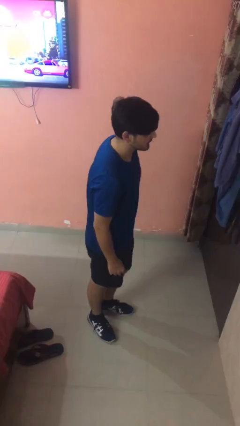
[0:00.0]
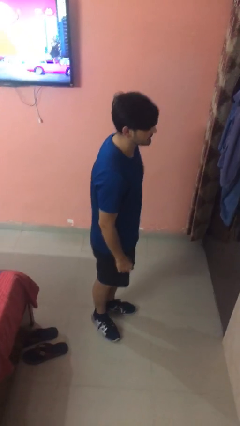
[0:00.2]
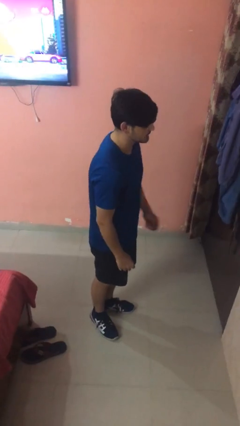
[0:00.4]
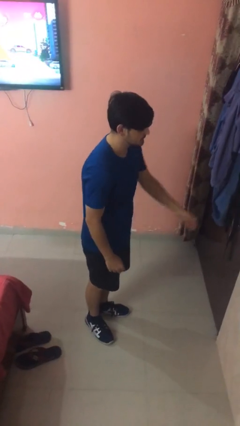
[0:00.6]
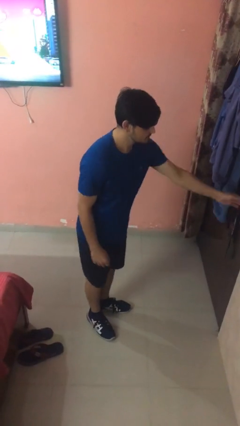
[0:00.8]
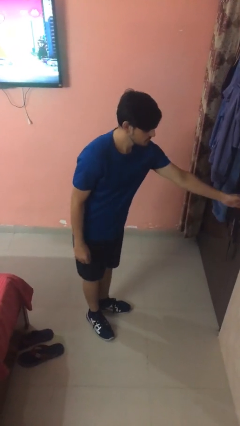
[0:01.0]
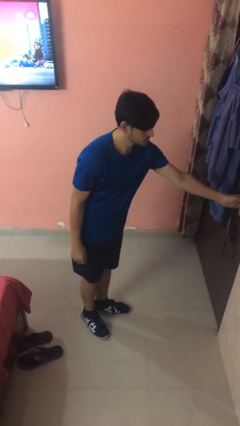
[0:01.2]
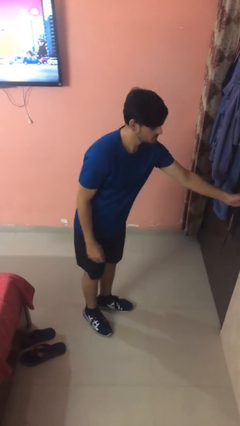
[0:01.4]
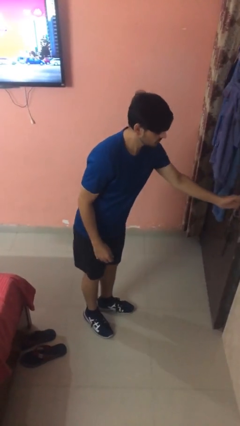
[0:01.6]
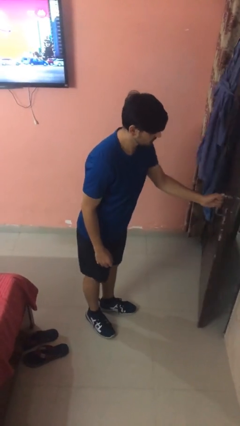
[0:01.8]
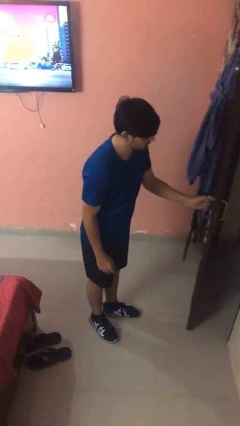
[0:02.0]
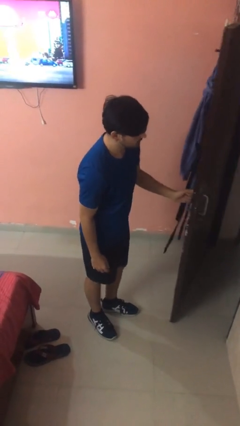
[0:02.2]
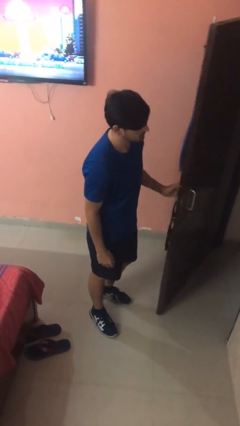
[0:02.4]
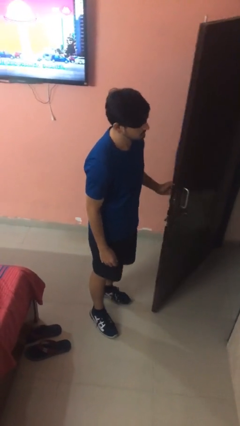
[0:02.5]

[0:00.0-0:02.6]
person opens facility door

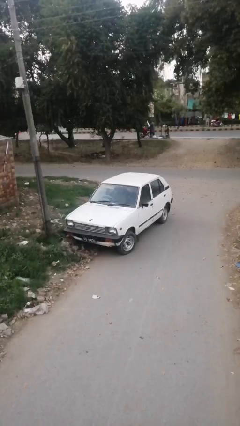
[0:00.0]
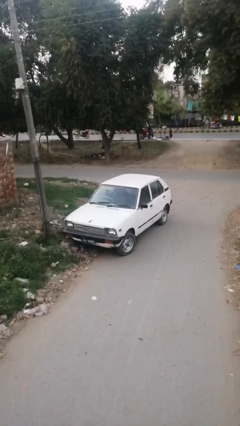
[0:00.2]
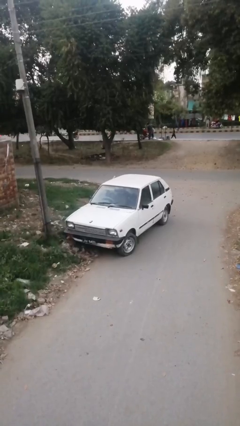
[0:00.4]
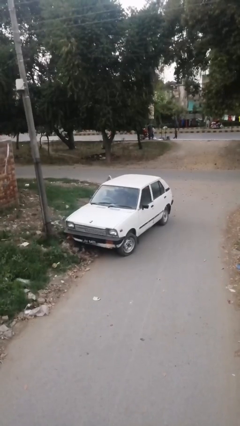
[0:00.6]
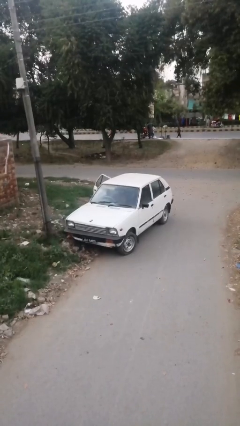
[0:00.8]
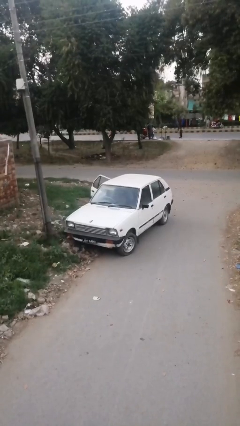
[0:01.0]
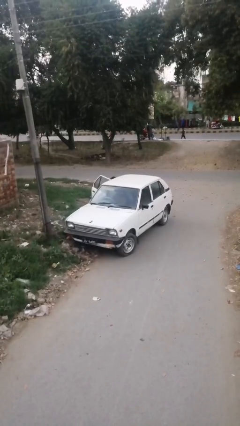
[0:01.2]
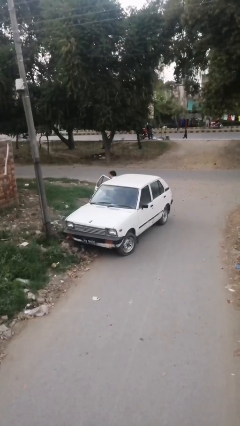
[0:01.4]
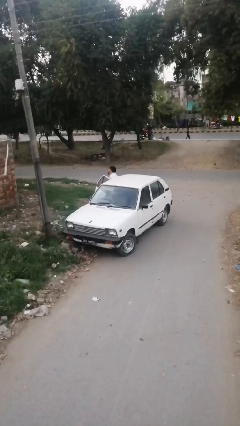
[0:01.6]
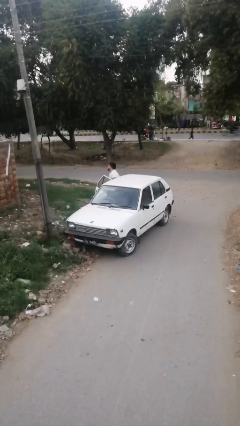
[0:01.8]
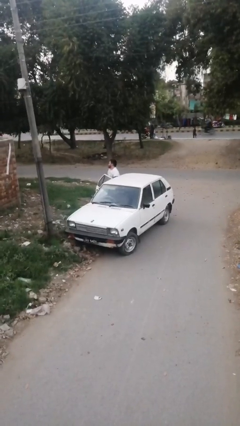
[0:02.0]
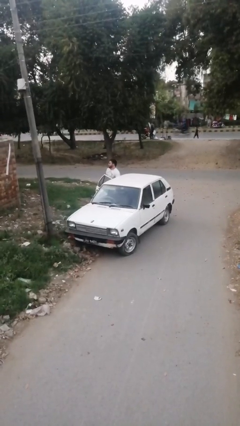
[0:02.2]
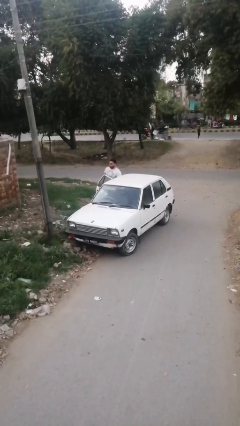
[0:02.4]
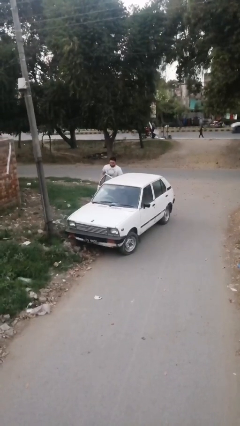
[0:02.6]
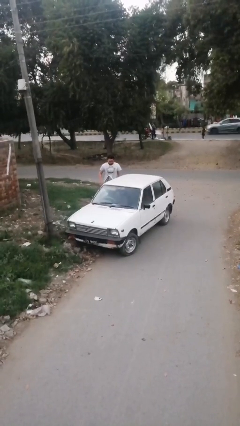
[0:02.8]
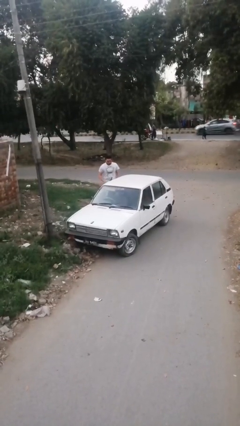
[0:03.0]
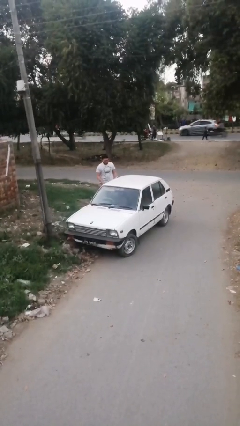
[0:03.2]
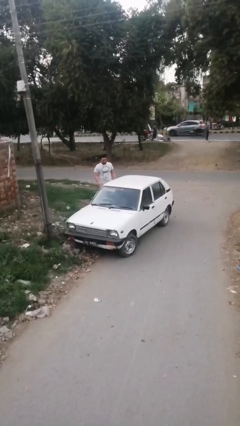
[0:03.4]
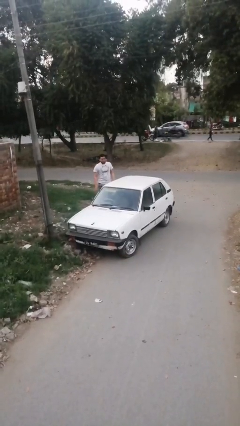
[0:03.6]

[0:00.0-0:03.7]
car drops off person

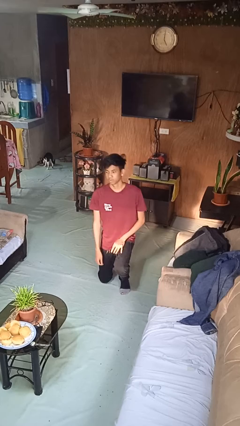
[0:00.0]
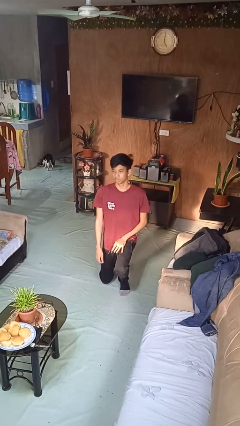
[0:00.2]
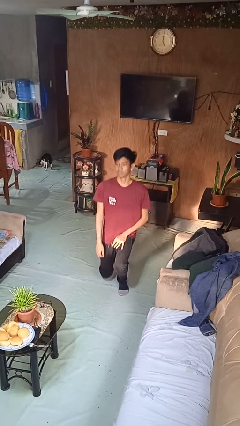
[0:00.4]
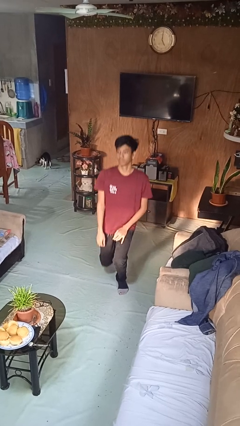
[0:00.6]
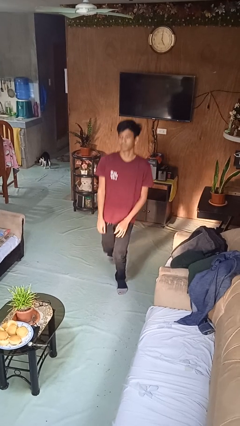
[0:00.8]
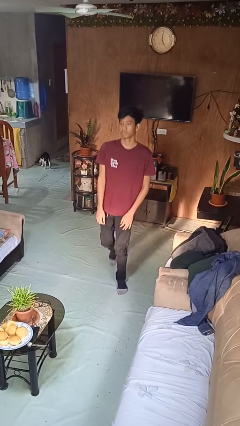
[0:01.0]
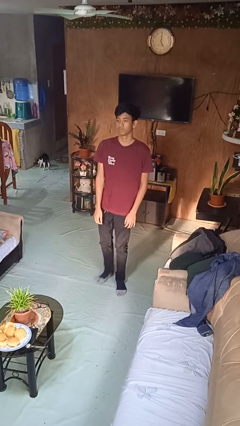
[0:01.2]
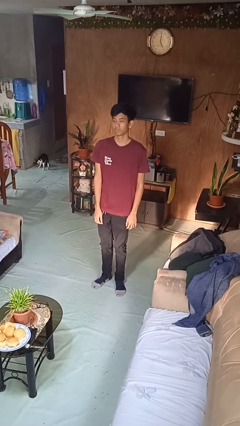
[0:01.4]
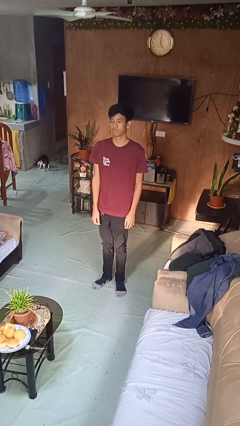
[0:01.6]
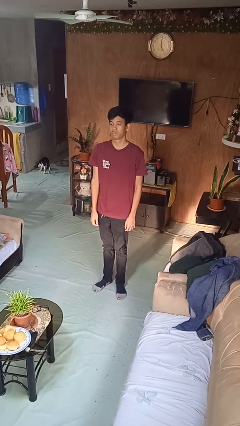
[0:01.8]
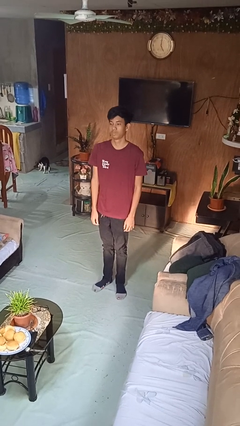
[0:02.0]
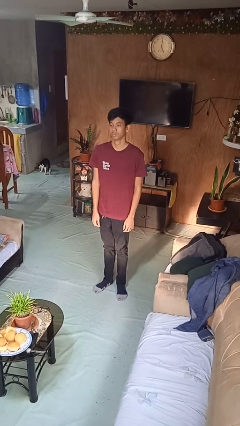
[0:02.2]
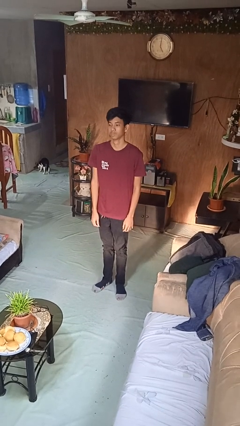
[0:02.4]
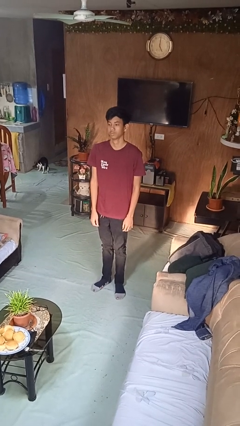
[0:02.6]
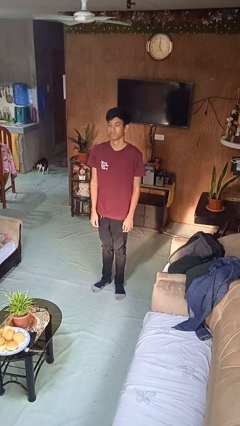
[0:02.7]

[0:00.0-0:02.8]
person stands up from floor

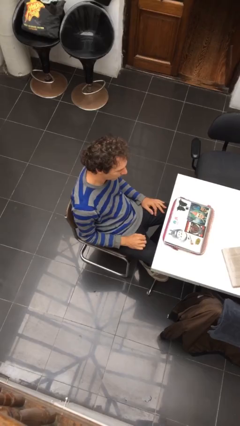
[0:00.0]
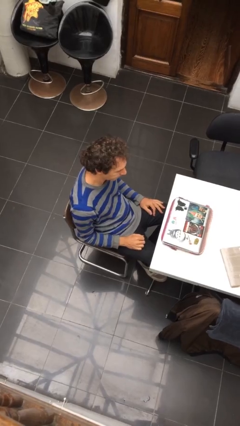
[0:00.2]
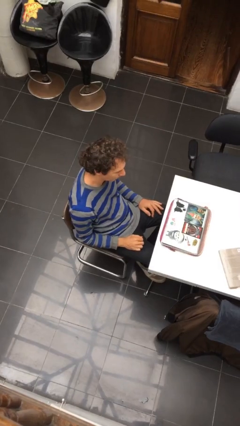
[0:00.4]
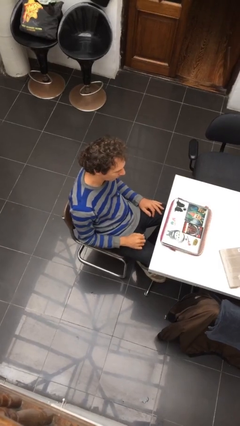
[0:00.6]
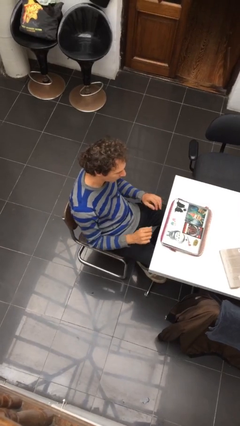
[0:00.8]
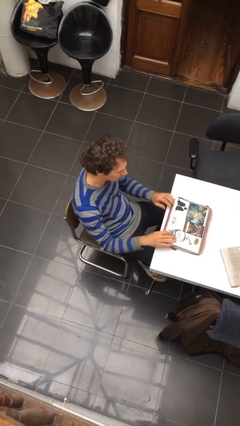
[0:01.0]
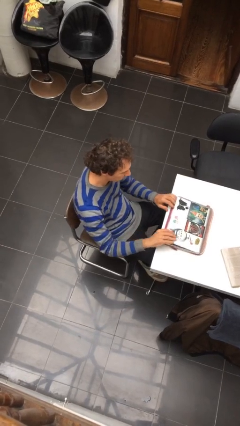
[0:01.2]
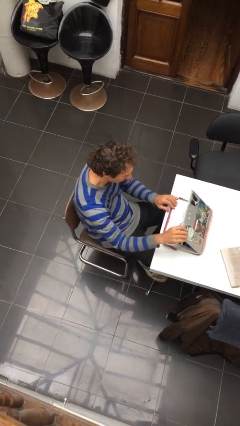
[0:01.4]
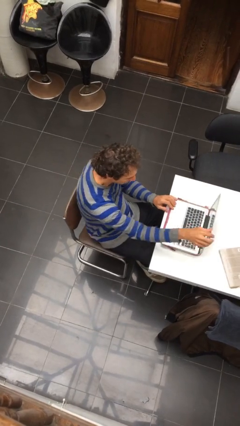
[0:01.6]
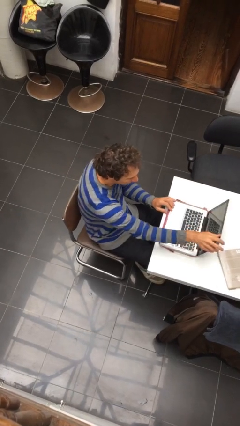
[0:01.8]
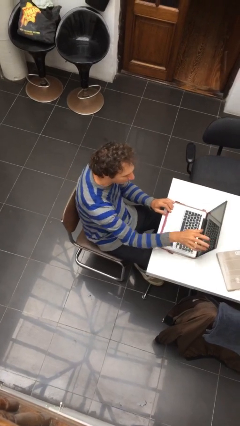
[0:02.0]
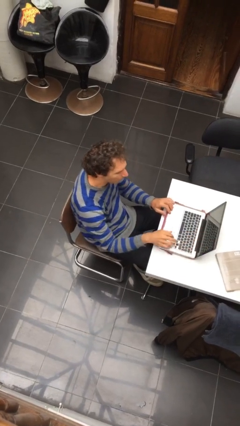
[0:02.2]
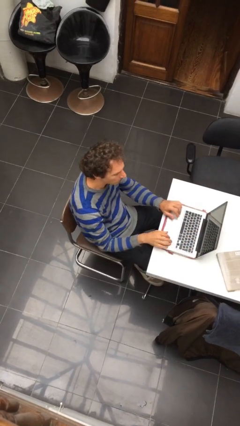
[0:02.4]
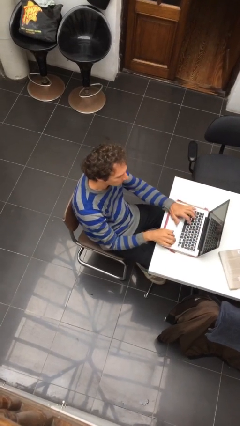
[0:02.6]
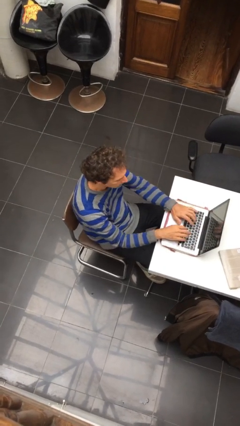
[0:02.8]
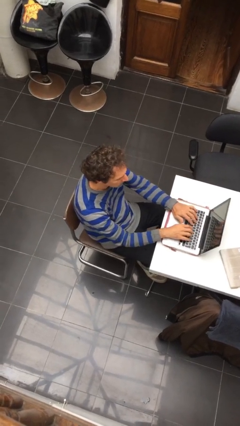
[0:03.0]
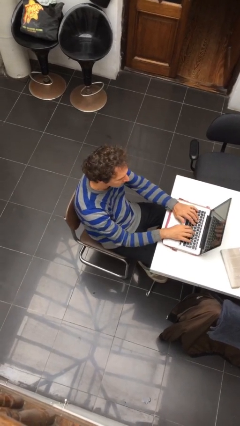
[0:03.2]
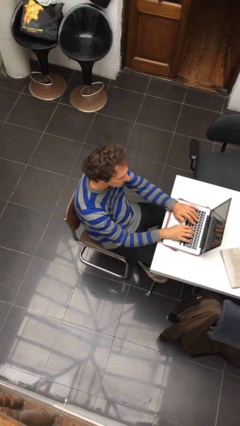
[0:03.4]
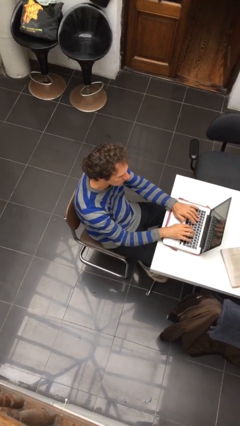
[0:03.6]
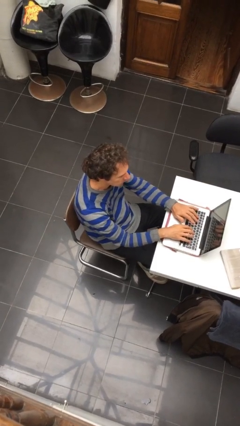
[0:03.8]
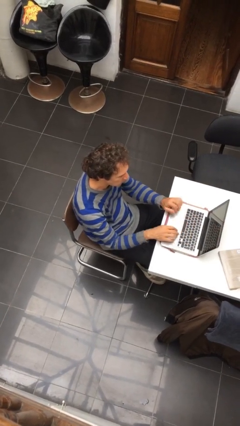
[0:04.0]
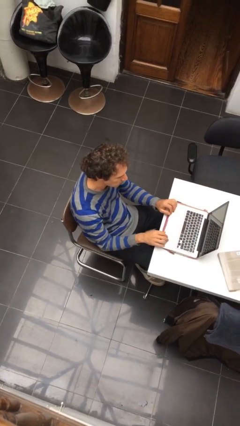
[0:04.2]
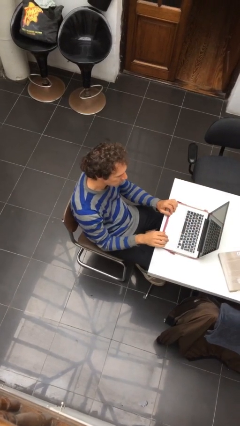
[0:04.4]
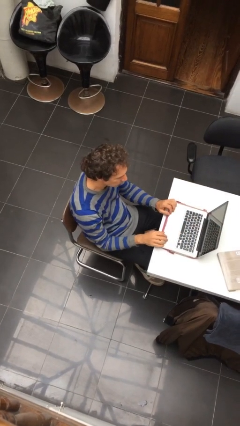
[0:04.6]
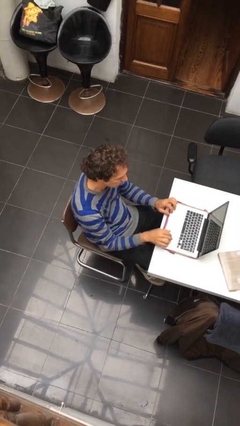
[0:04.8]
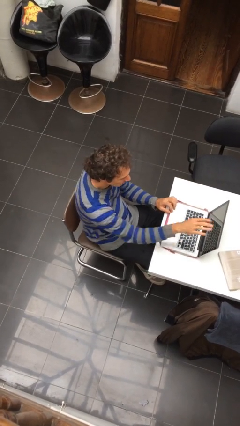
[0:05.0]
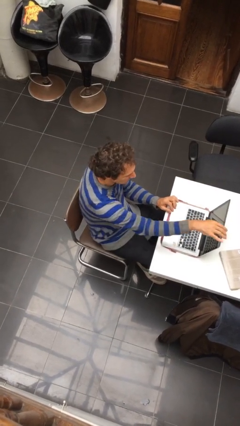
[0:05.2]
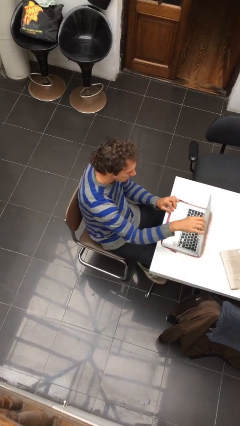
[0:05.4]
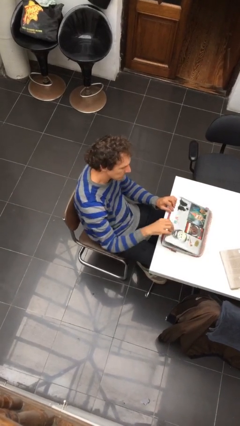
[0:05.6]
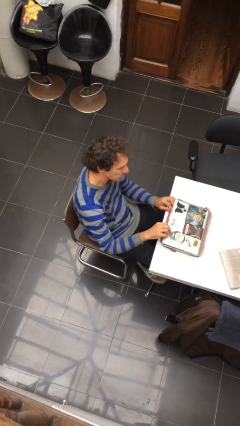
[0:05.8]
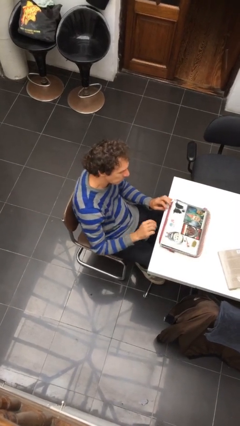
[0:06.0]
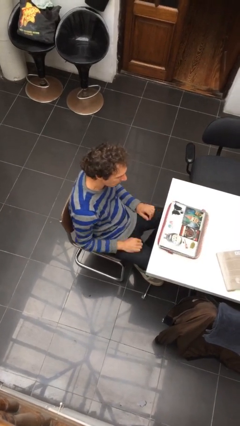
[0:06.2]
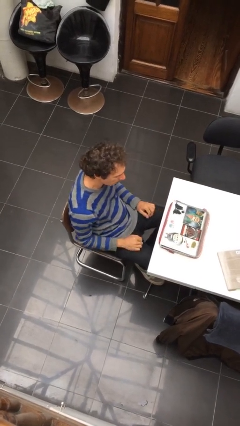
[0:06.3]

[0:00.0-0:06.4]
person interacts with laptop

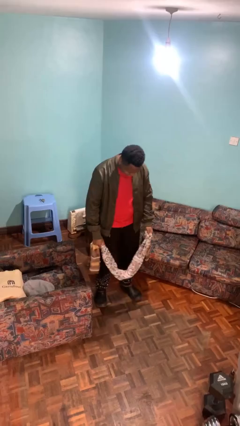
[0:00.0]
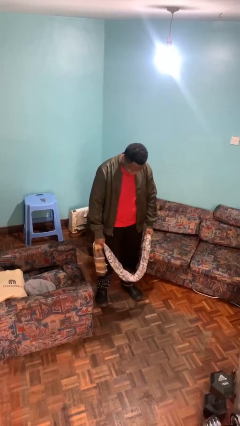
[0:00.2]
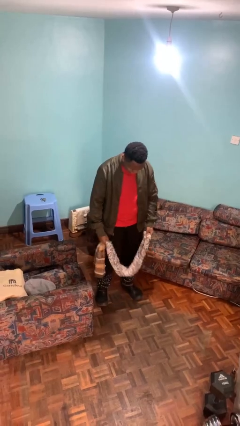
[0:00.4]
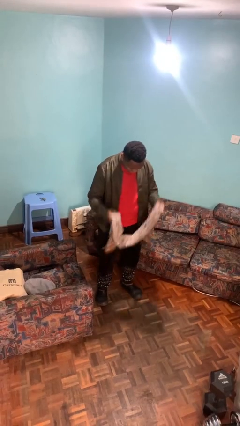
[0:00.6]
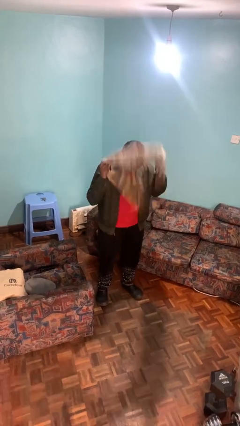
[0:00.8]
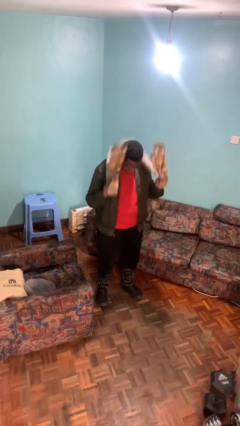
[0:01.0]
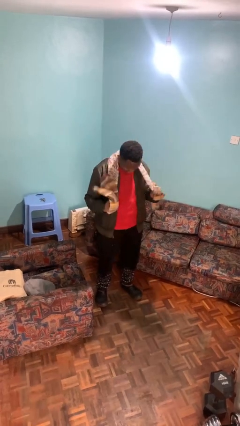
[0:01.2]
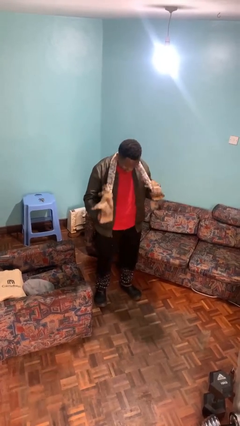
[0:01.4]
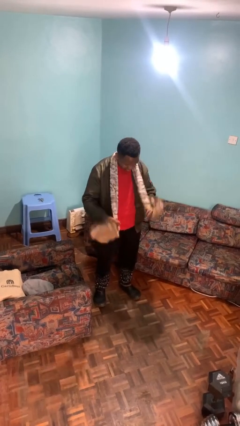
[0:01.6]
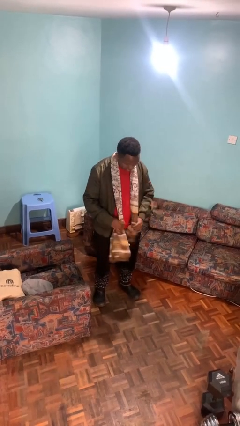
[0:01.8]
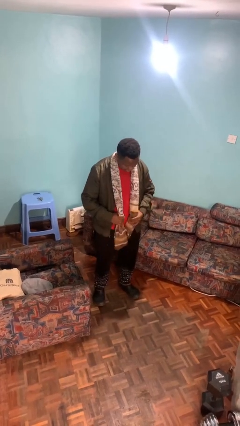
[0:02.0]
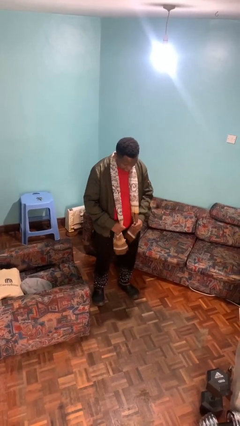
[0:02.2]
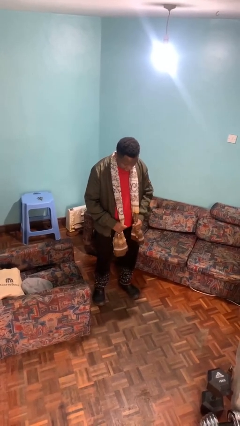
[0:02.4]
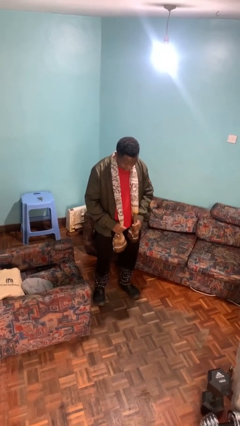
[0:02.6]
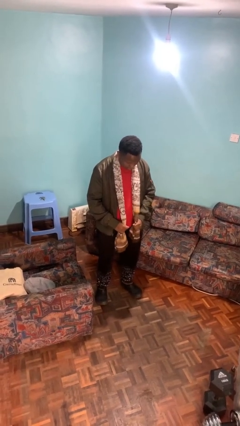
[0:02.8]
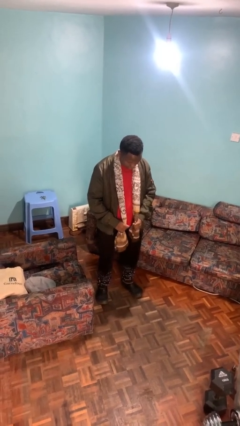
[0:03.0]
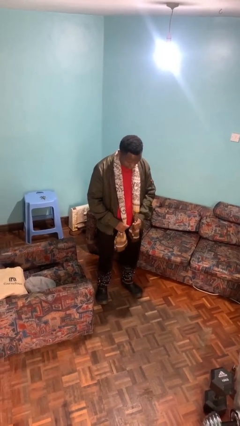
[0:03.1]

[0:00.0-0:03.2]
person puts on scarf
